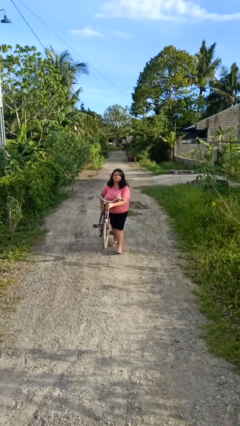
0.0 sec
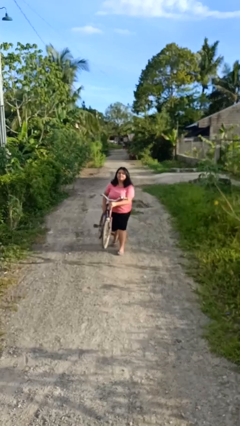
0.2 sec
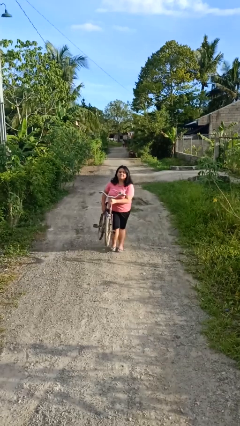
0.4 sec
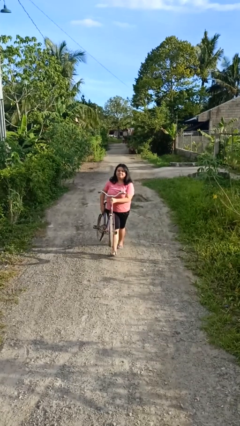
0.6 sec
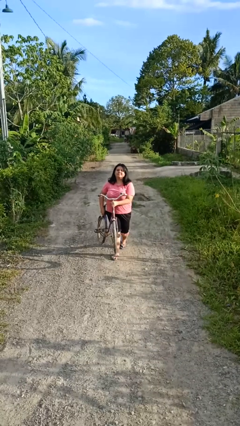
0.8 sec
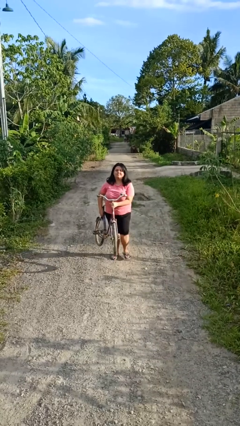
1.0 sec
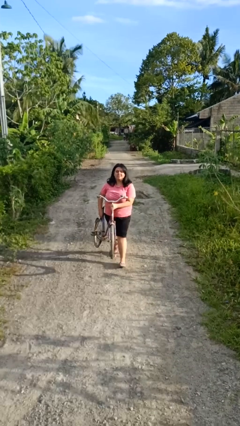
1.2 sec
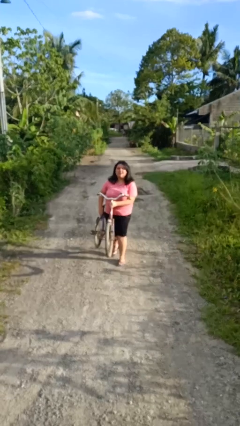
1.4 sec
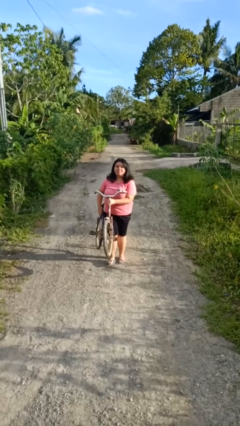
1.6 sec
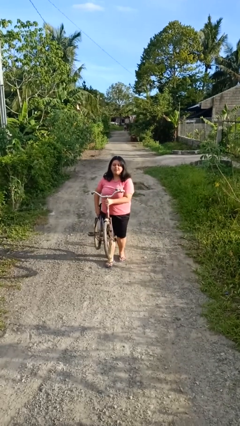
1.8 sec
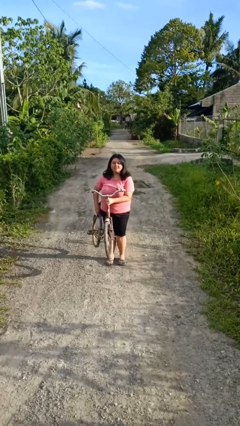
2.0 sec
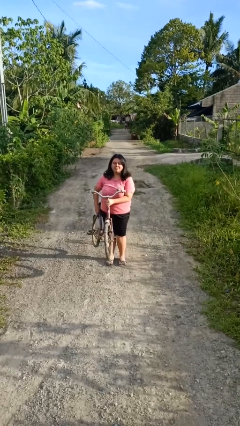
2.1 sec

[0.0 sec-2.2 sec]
person carries bicycle

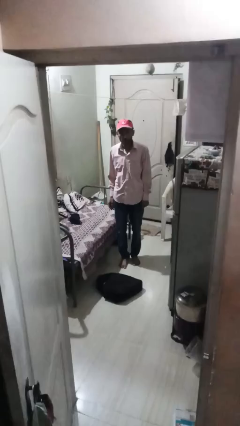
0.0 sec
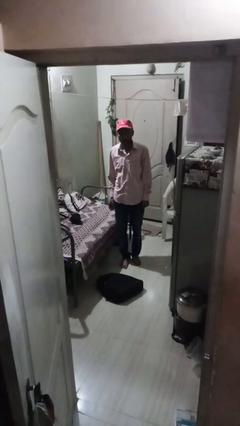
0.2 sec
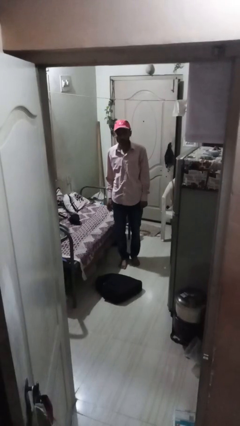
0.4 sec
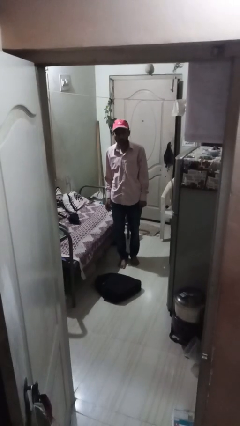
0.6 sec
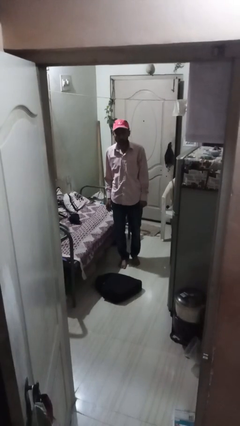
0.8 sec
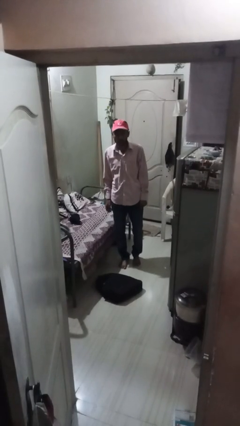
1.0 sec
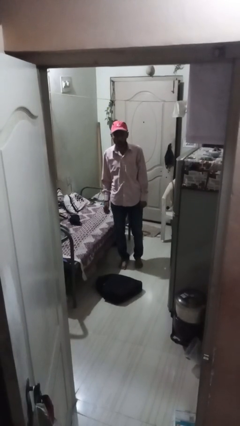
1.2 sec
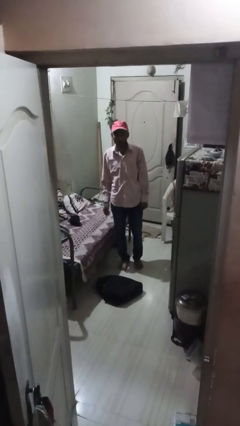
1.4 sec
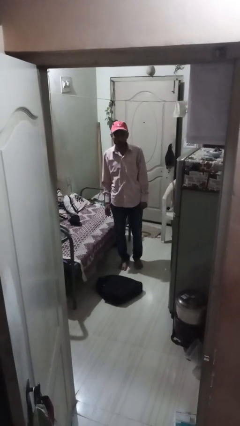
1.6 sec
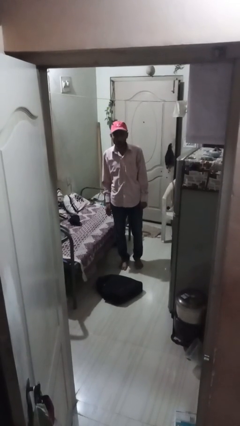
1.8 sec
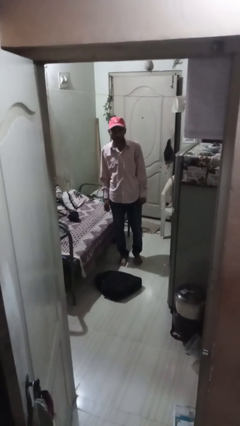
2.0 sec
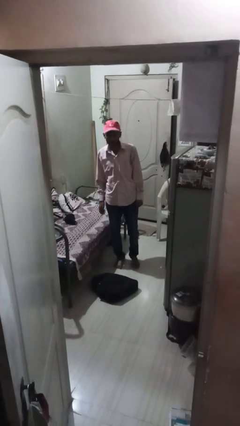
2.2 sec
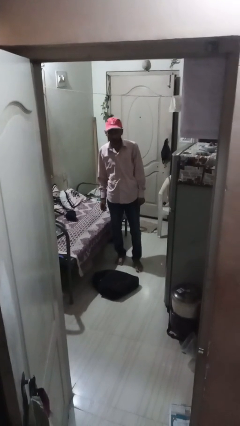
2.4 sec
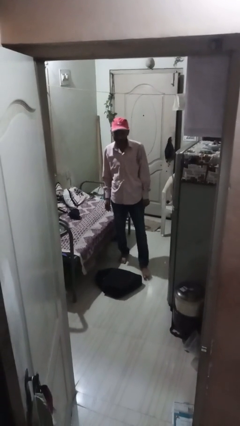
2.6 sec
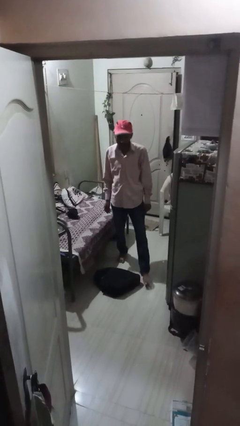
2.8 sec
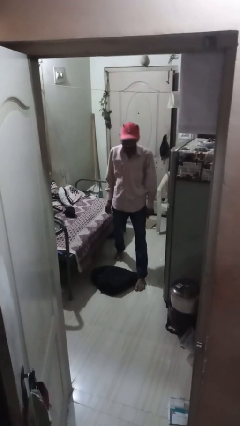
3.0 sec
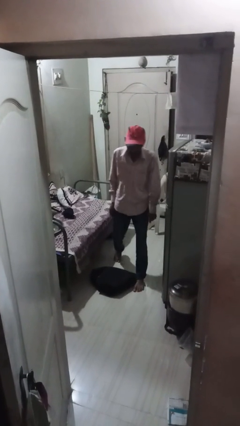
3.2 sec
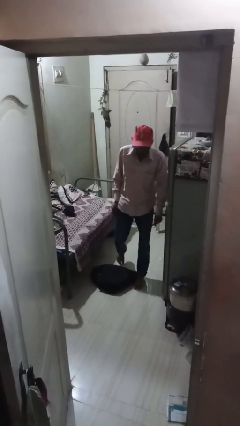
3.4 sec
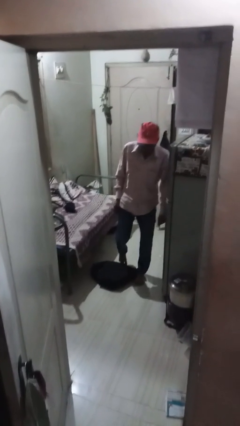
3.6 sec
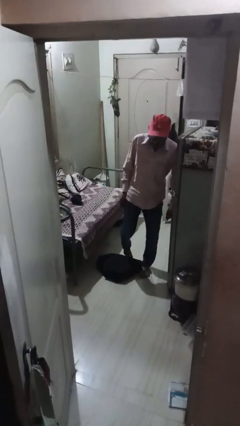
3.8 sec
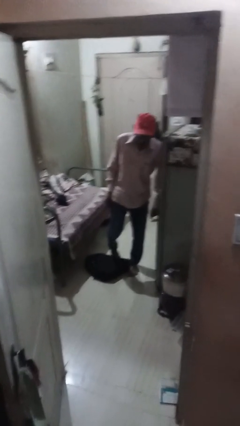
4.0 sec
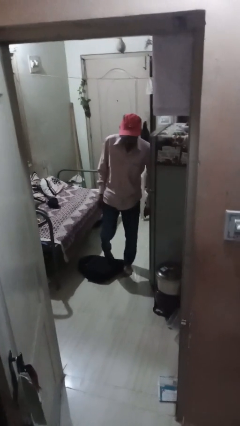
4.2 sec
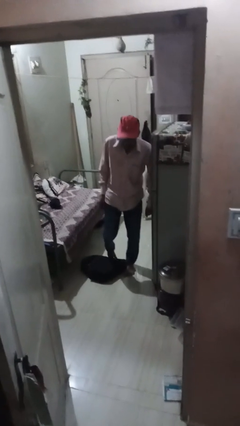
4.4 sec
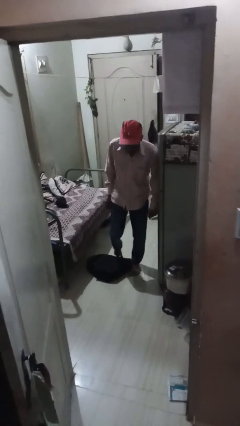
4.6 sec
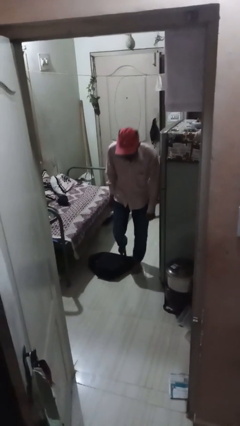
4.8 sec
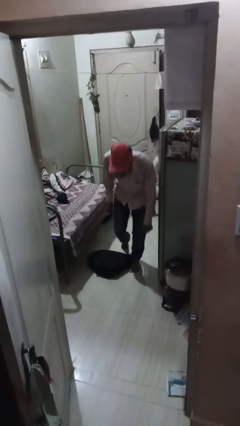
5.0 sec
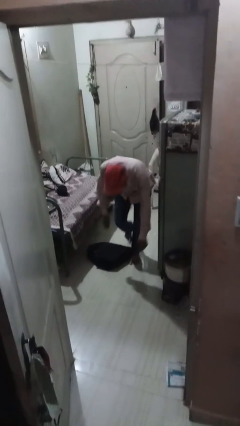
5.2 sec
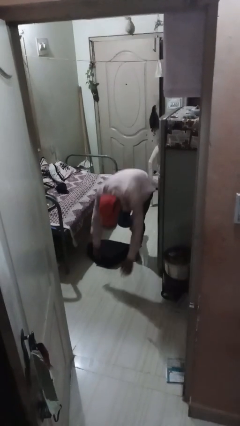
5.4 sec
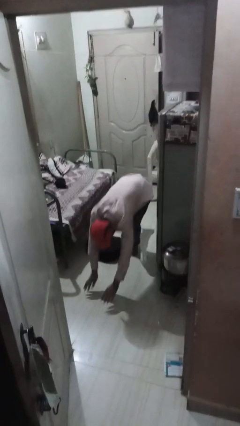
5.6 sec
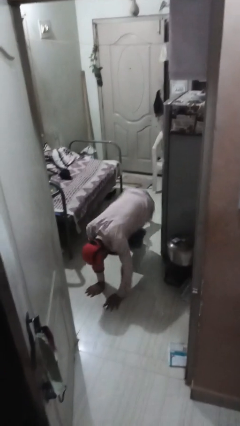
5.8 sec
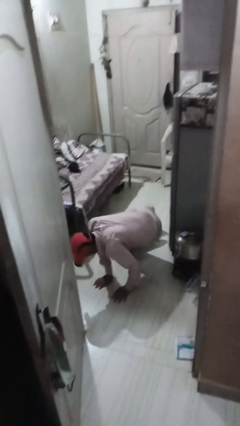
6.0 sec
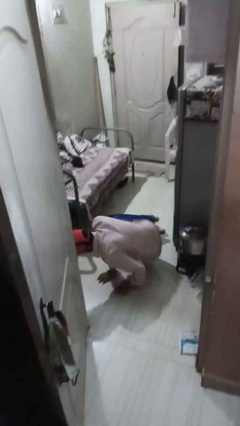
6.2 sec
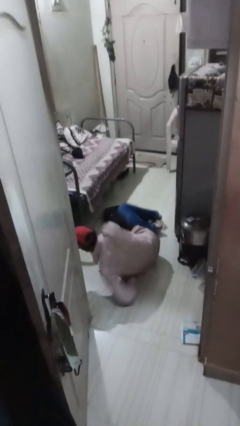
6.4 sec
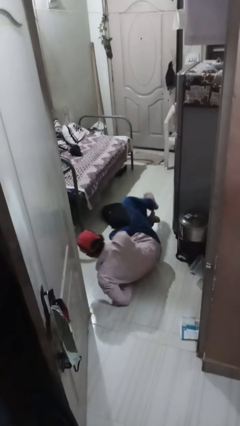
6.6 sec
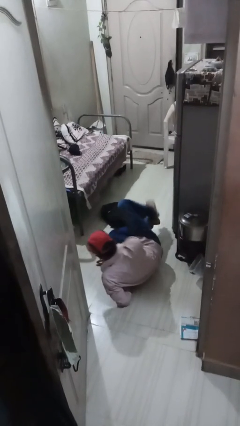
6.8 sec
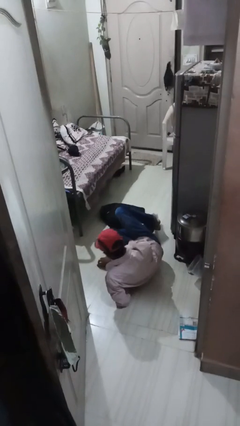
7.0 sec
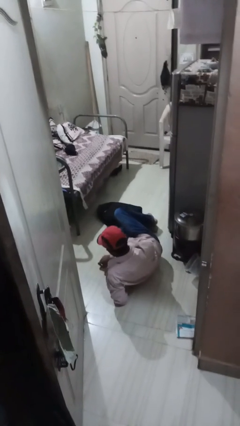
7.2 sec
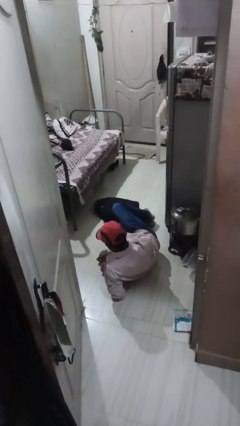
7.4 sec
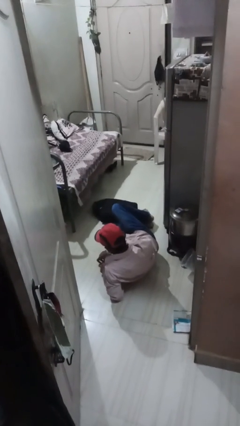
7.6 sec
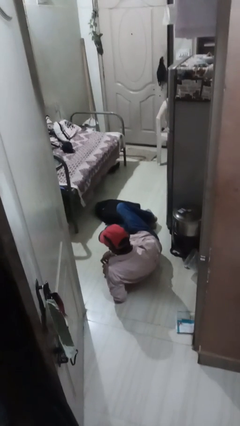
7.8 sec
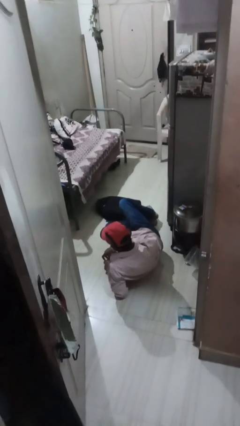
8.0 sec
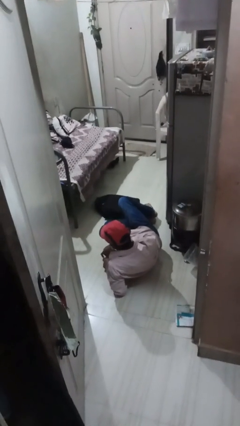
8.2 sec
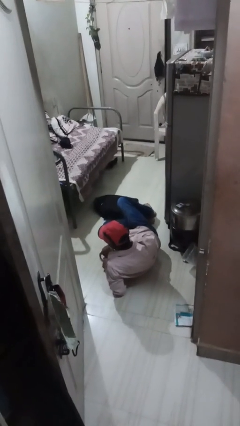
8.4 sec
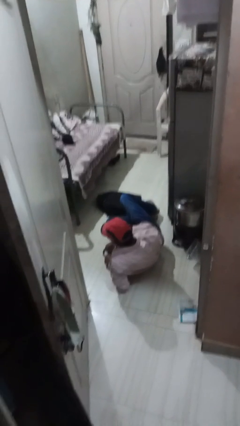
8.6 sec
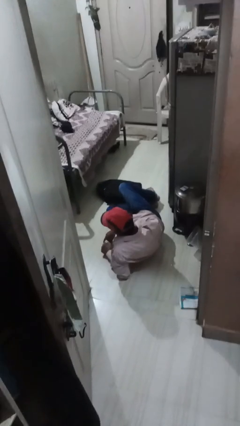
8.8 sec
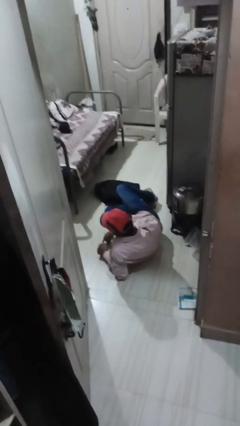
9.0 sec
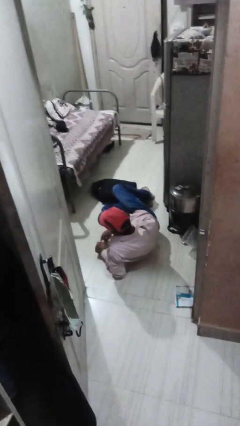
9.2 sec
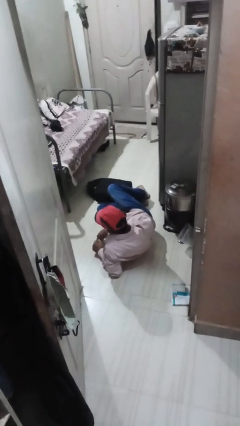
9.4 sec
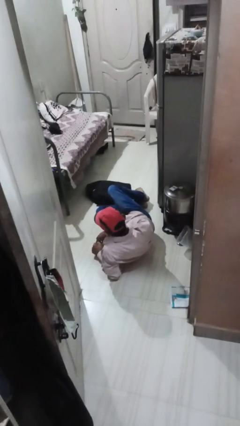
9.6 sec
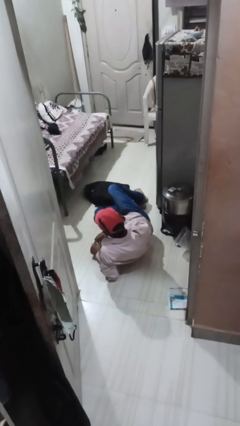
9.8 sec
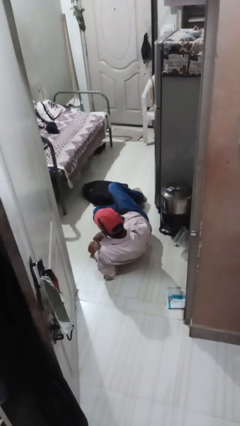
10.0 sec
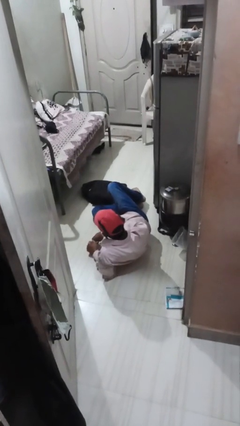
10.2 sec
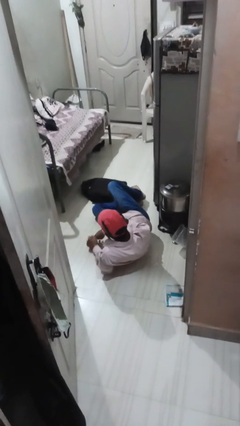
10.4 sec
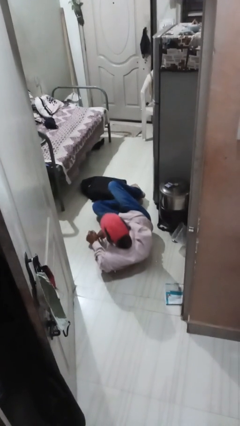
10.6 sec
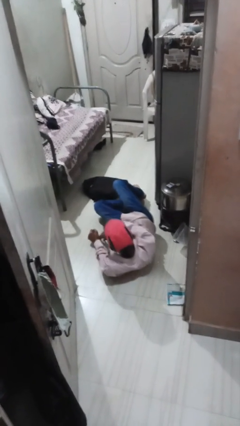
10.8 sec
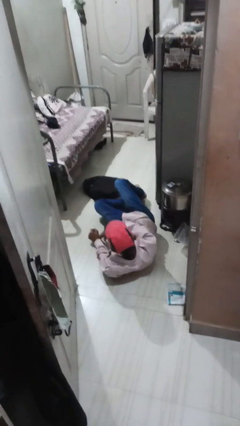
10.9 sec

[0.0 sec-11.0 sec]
person trips on object on floor

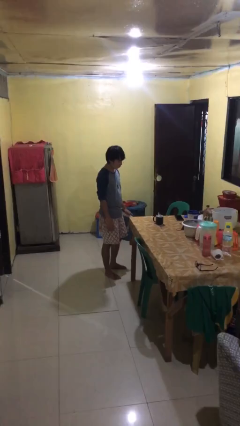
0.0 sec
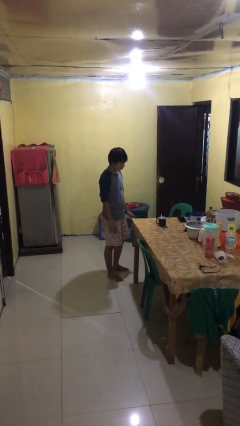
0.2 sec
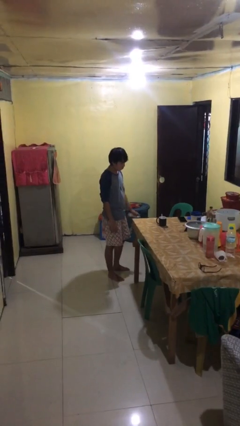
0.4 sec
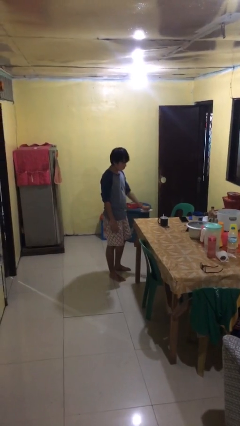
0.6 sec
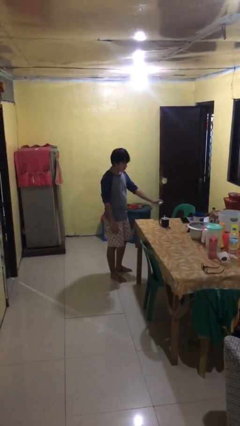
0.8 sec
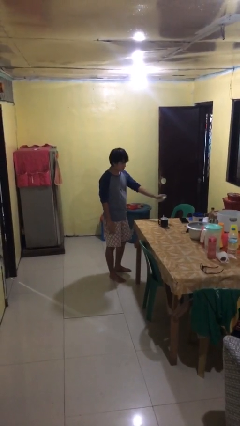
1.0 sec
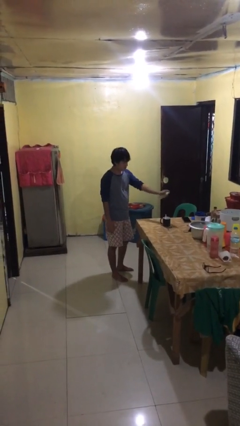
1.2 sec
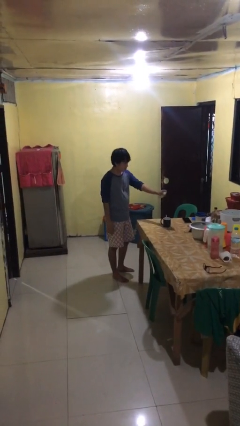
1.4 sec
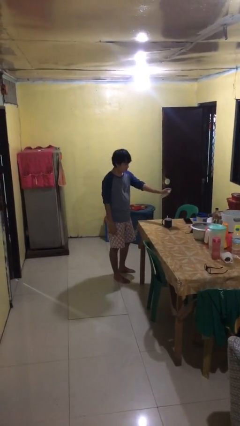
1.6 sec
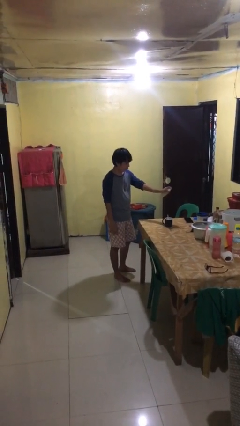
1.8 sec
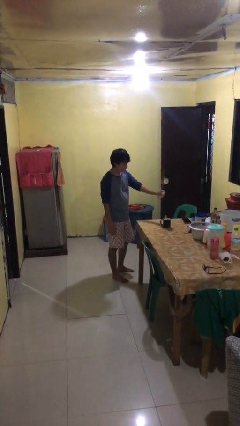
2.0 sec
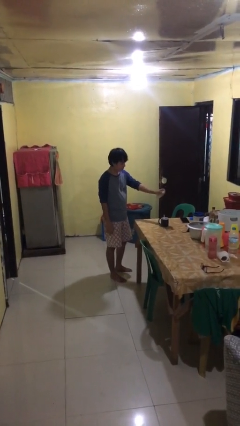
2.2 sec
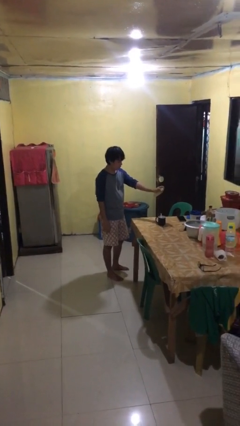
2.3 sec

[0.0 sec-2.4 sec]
person sprays from bottle

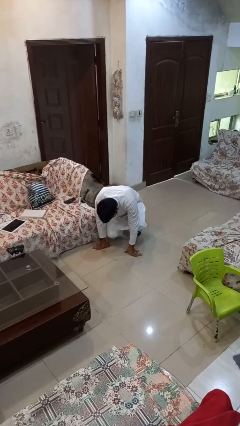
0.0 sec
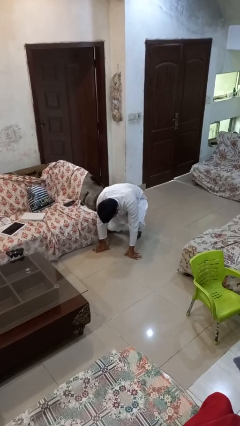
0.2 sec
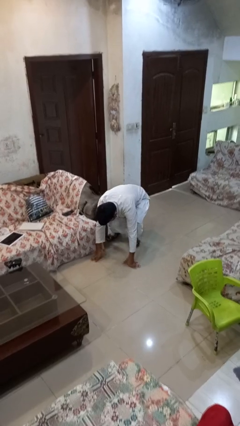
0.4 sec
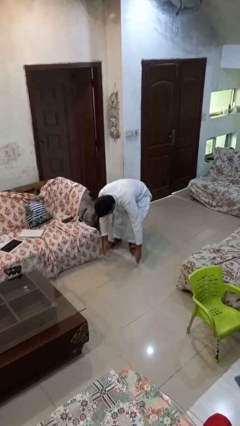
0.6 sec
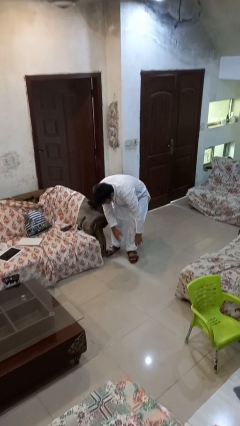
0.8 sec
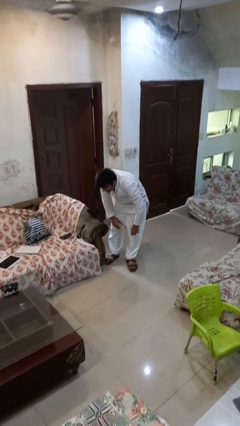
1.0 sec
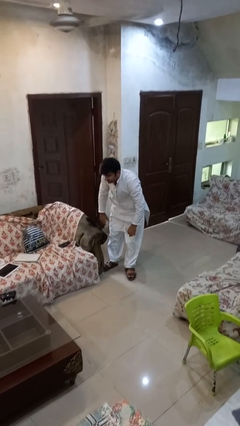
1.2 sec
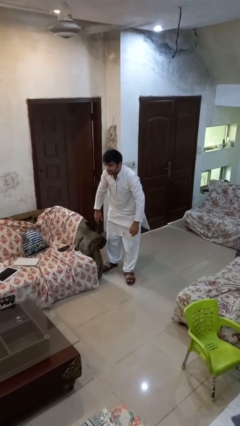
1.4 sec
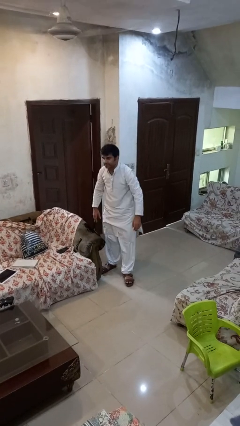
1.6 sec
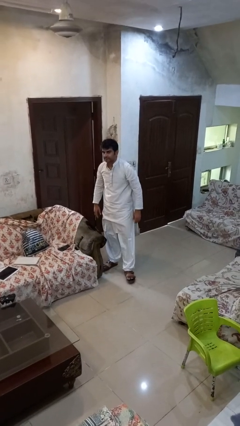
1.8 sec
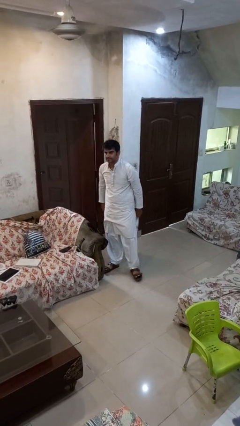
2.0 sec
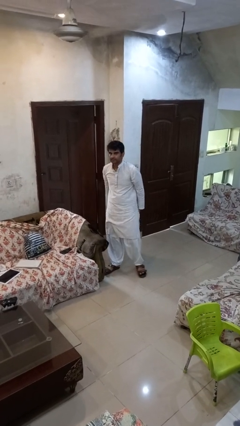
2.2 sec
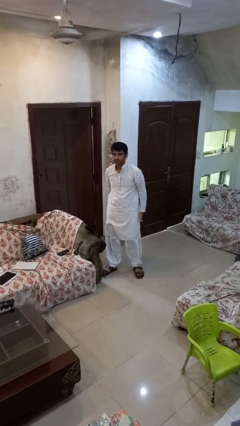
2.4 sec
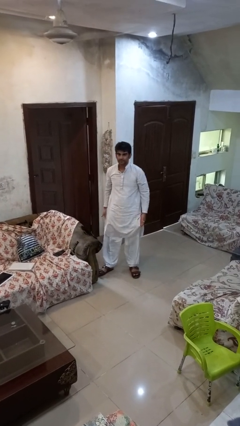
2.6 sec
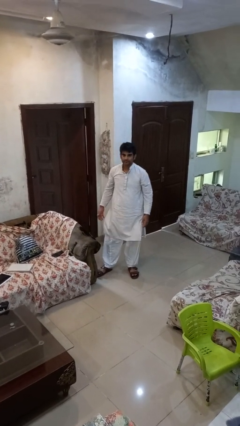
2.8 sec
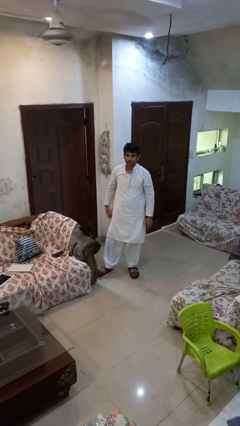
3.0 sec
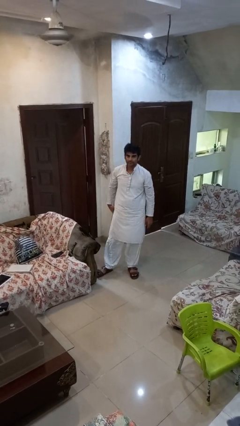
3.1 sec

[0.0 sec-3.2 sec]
person stands up from floor
